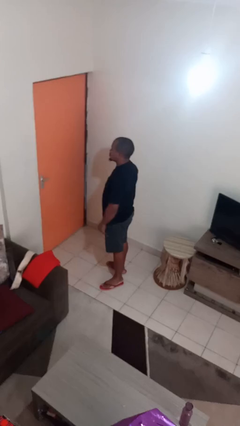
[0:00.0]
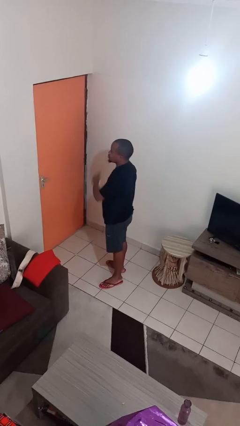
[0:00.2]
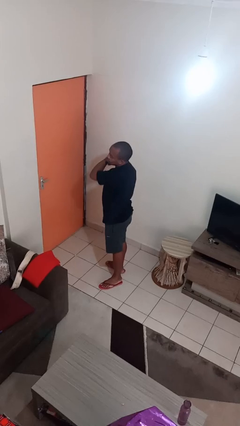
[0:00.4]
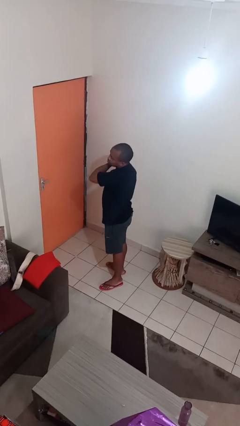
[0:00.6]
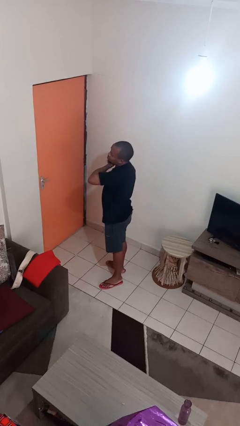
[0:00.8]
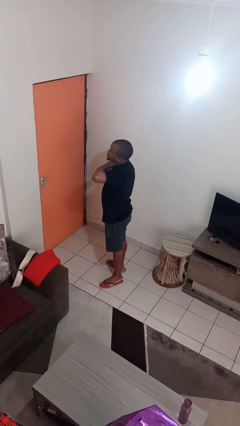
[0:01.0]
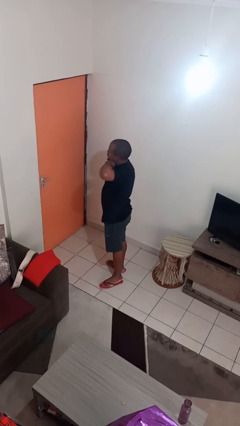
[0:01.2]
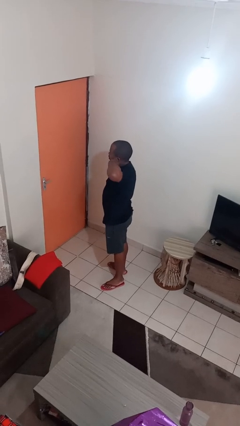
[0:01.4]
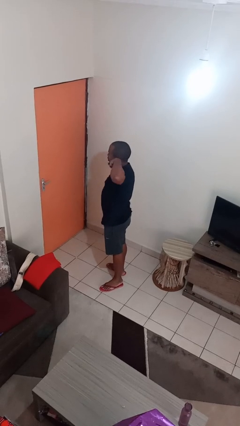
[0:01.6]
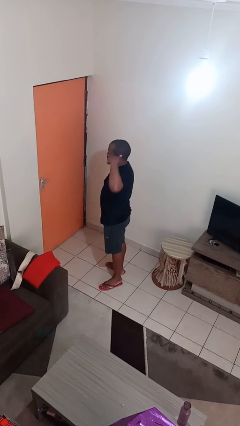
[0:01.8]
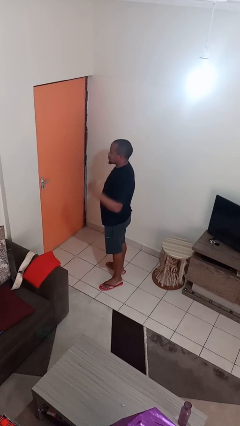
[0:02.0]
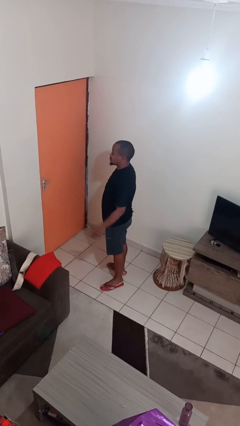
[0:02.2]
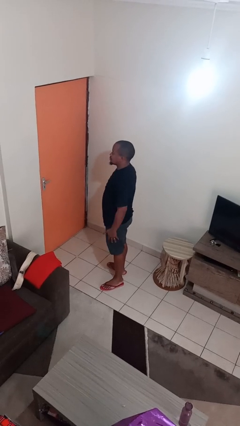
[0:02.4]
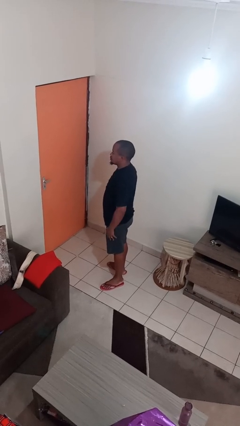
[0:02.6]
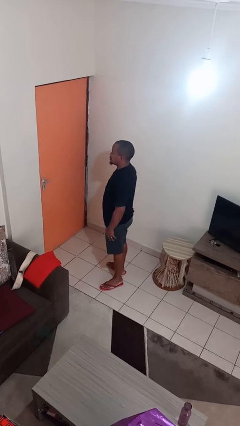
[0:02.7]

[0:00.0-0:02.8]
person gestures cut

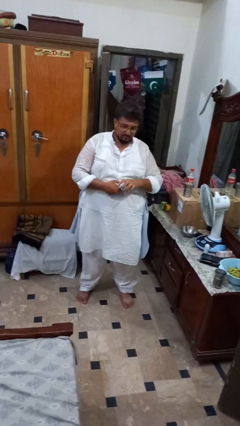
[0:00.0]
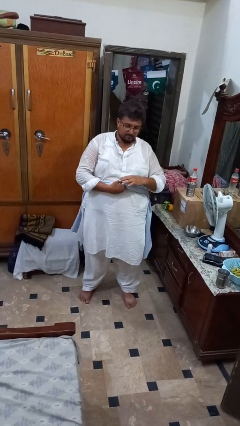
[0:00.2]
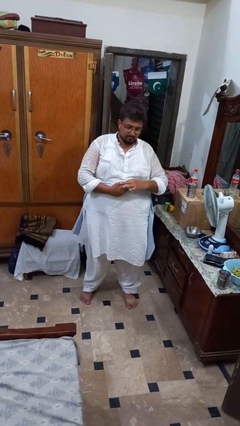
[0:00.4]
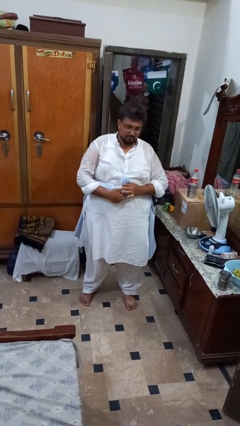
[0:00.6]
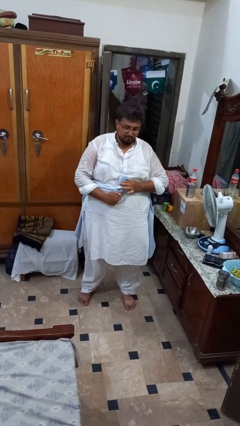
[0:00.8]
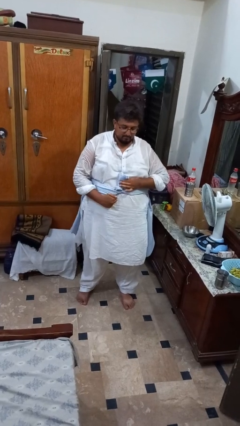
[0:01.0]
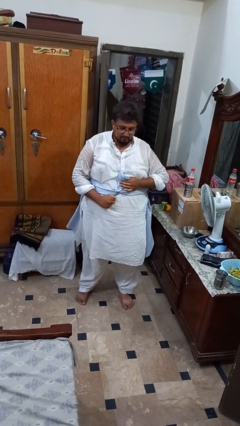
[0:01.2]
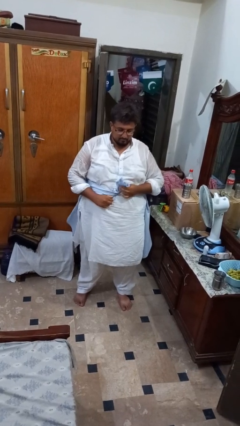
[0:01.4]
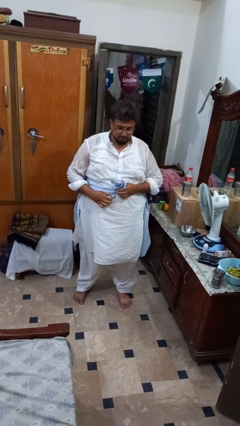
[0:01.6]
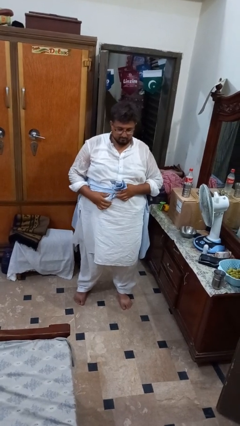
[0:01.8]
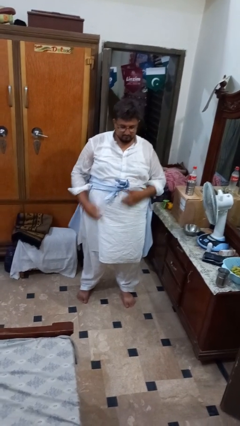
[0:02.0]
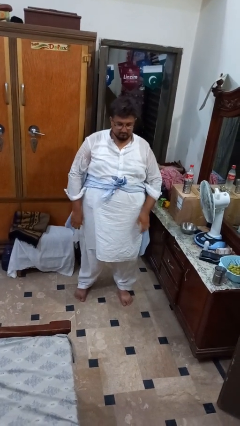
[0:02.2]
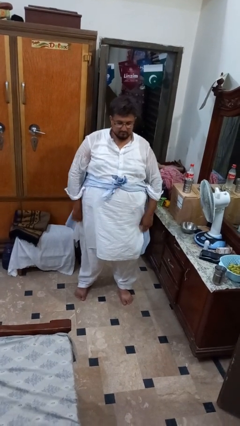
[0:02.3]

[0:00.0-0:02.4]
person ties jacket around waist

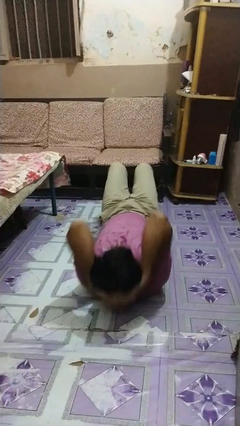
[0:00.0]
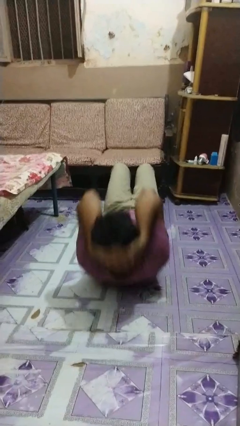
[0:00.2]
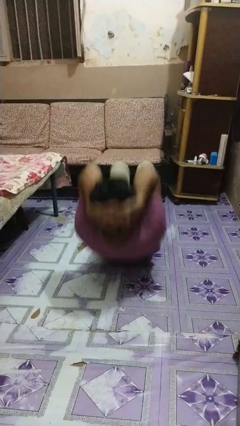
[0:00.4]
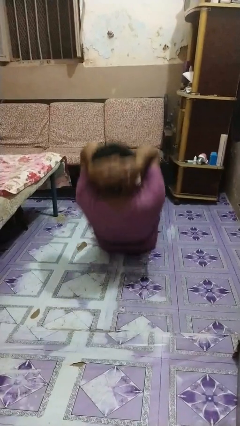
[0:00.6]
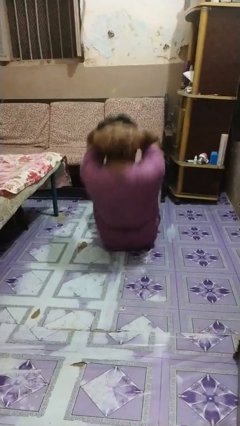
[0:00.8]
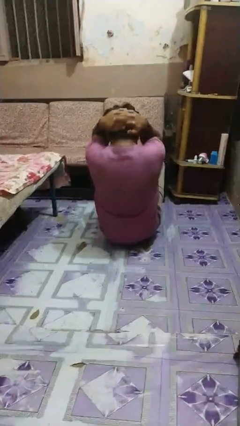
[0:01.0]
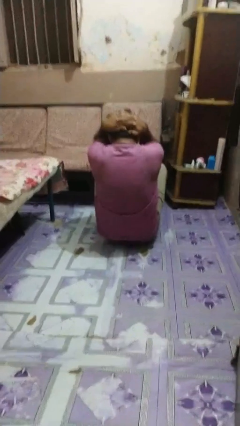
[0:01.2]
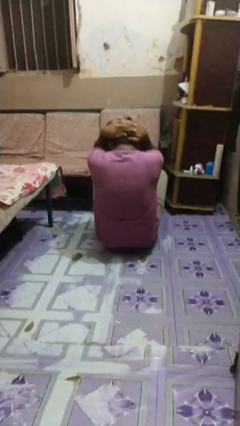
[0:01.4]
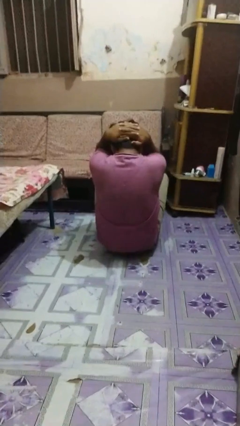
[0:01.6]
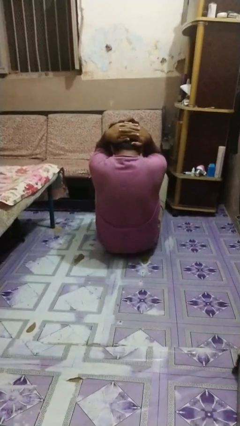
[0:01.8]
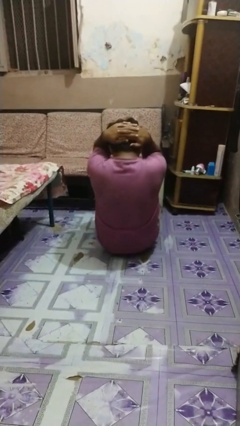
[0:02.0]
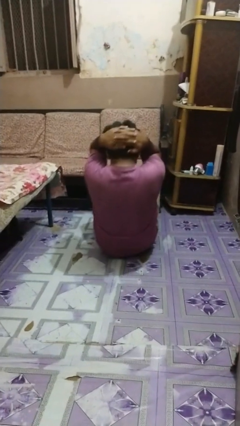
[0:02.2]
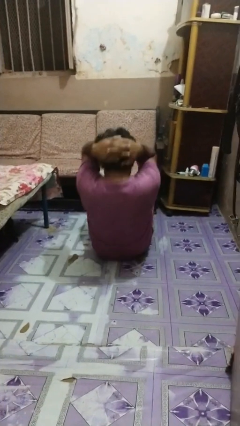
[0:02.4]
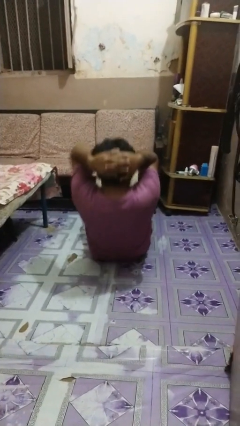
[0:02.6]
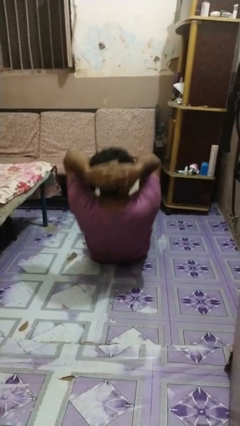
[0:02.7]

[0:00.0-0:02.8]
person exercises with situp

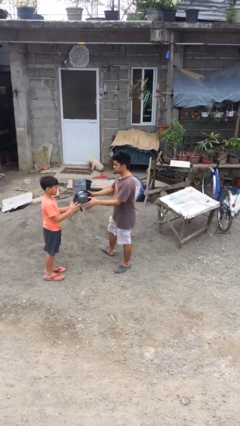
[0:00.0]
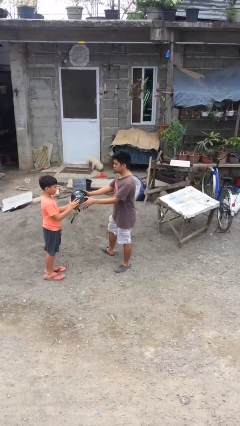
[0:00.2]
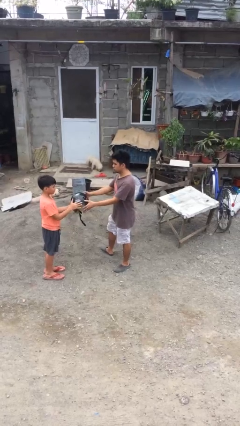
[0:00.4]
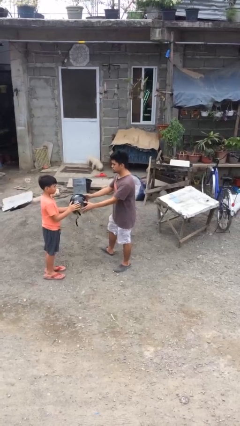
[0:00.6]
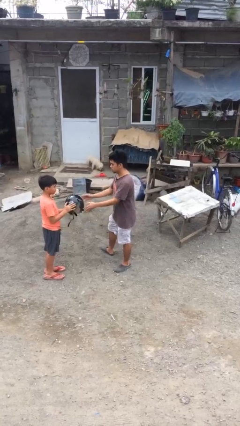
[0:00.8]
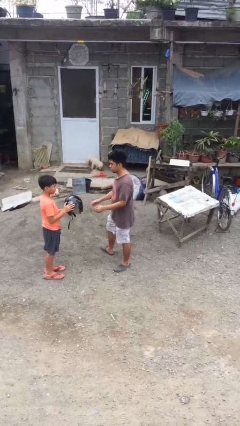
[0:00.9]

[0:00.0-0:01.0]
person transfers object to person

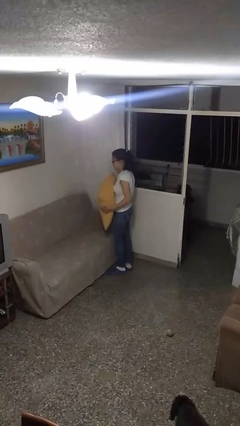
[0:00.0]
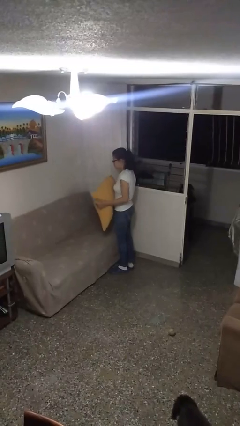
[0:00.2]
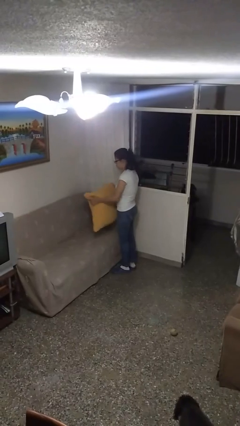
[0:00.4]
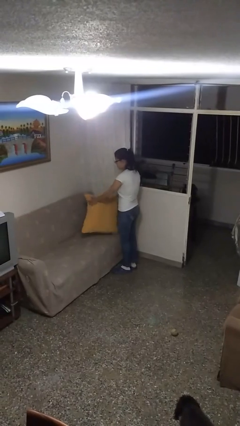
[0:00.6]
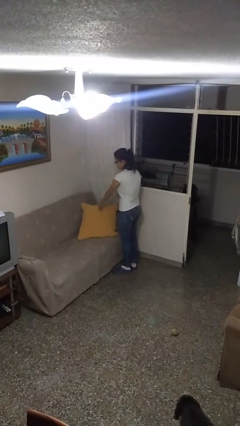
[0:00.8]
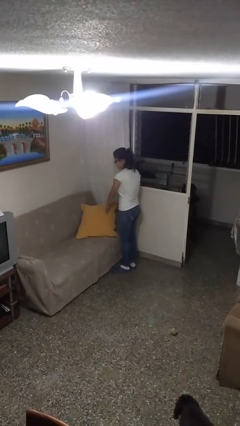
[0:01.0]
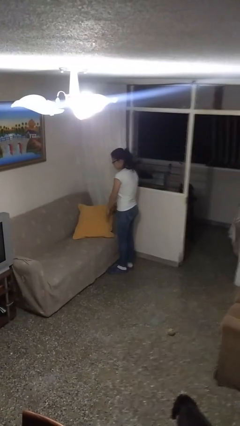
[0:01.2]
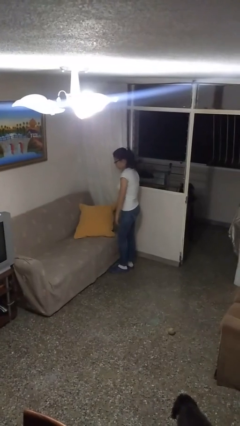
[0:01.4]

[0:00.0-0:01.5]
person puts down object on couch

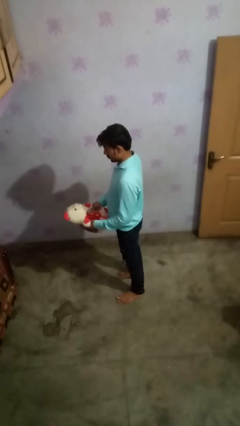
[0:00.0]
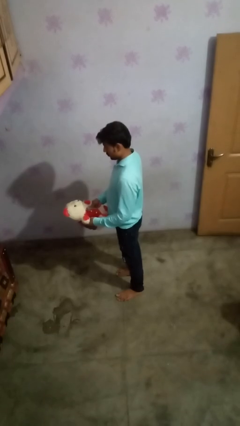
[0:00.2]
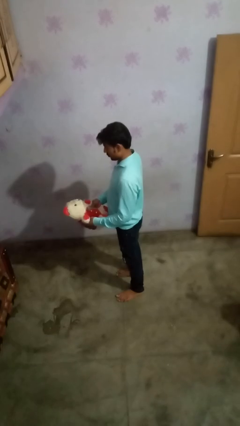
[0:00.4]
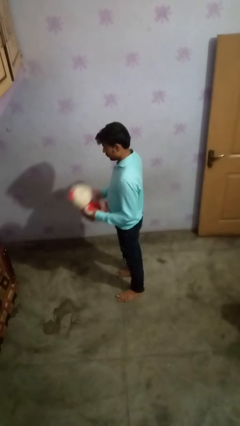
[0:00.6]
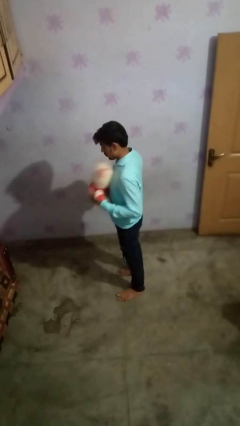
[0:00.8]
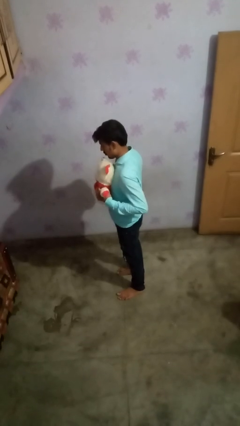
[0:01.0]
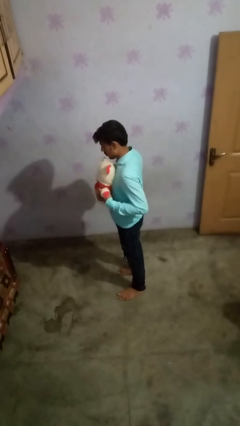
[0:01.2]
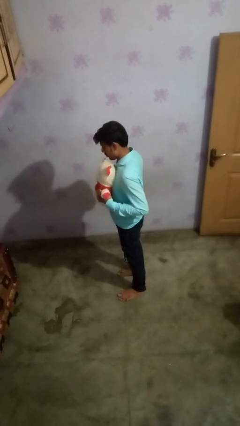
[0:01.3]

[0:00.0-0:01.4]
person hugs stuffed animal

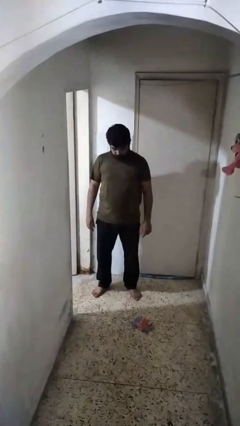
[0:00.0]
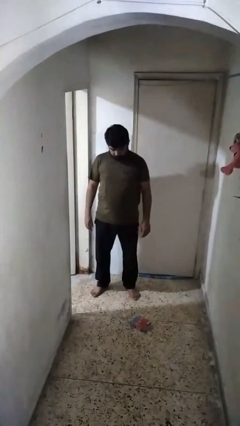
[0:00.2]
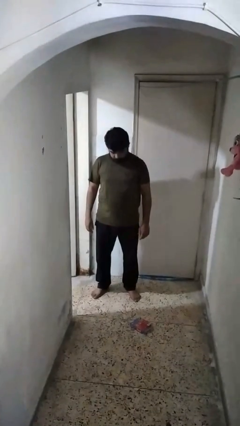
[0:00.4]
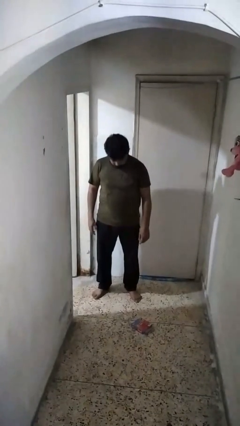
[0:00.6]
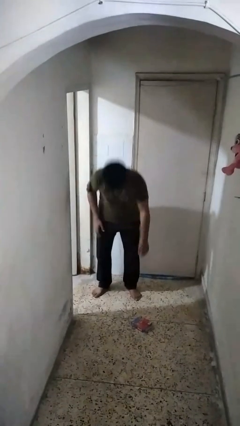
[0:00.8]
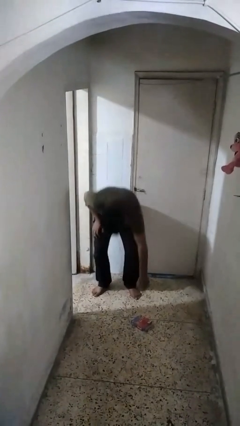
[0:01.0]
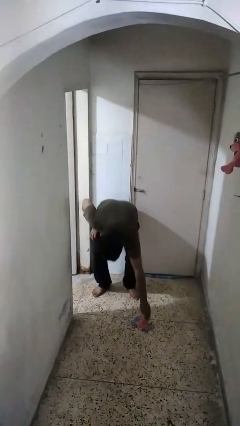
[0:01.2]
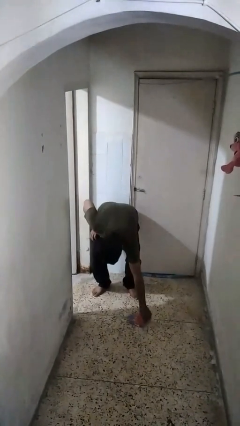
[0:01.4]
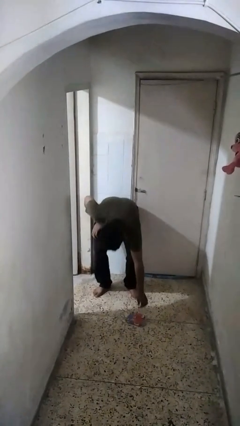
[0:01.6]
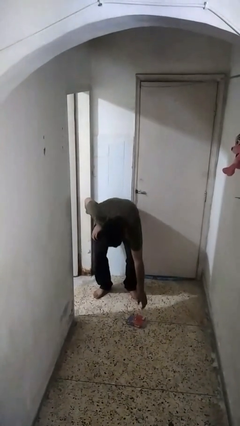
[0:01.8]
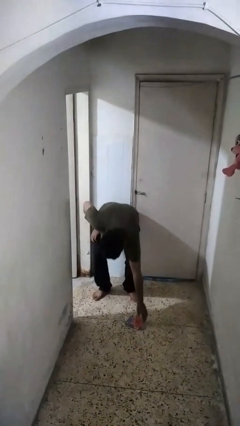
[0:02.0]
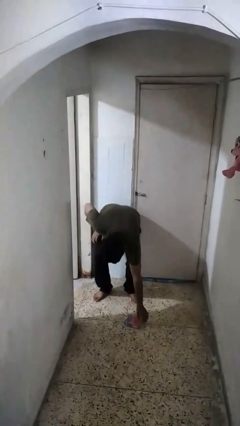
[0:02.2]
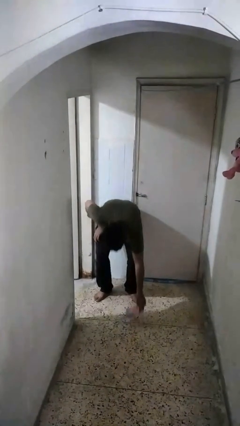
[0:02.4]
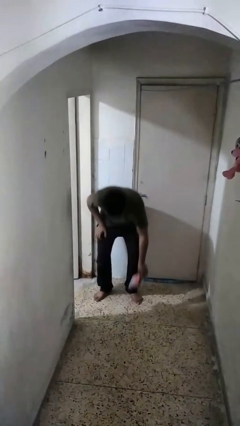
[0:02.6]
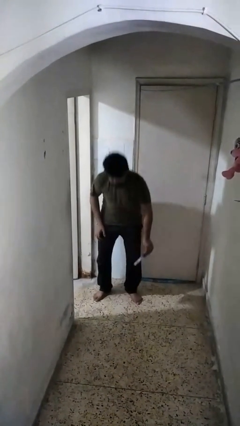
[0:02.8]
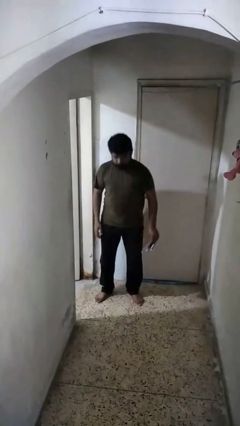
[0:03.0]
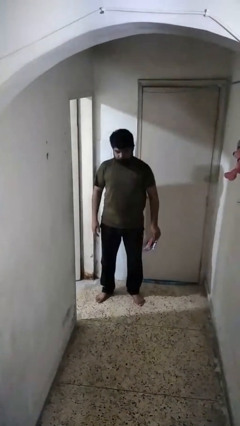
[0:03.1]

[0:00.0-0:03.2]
person picks up object from floor

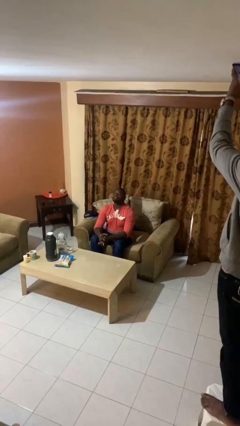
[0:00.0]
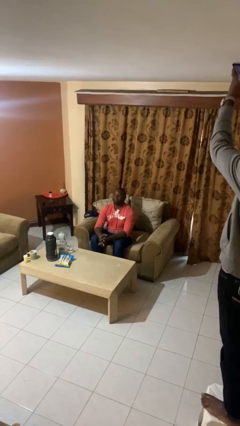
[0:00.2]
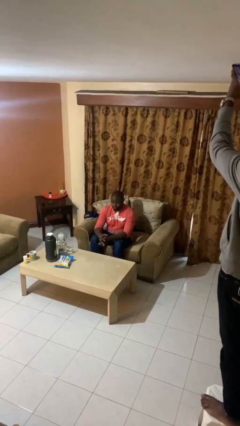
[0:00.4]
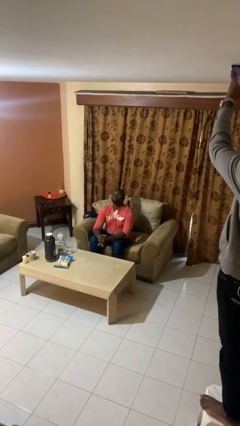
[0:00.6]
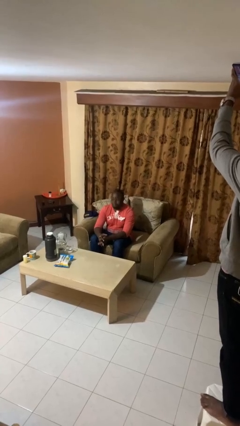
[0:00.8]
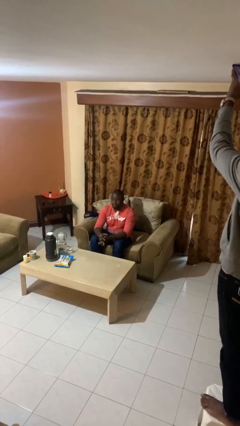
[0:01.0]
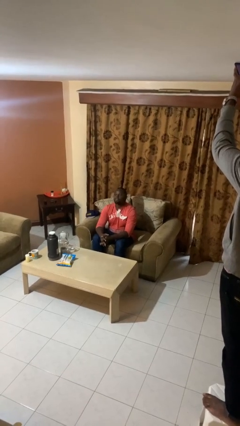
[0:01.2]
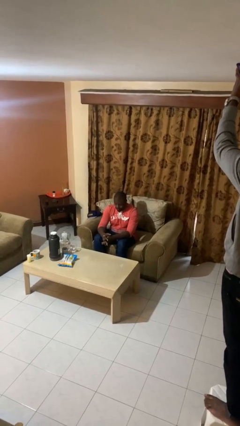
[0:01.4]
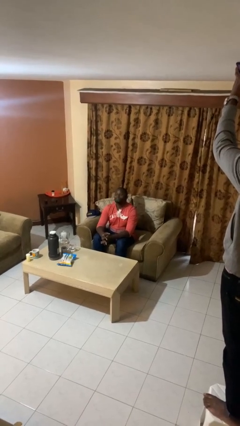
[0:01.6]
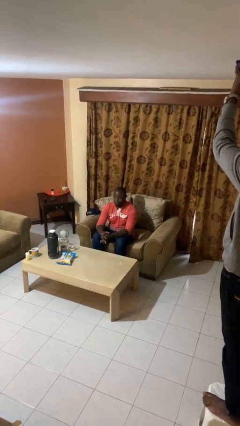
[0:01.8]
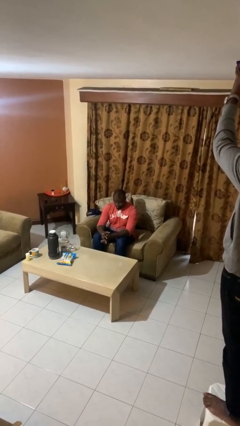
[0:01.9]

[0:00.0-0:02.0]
person nods head
